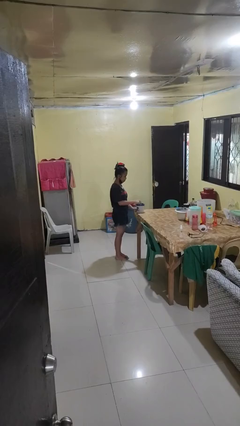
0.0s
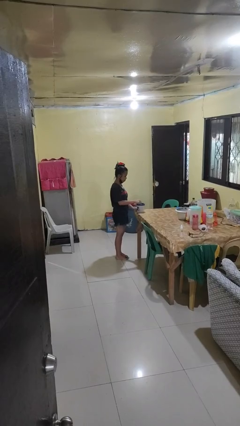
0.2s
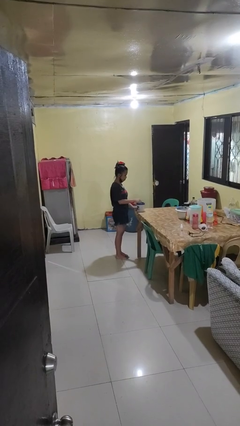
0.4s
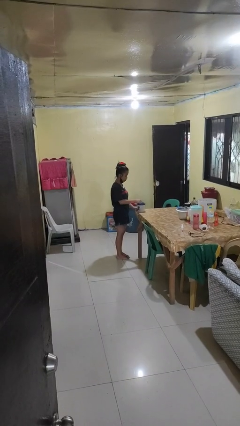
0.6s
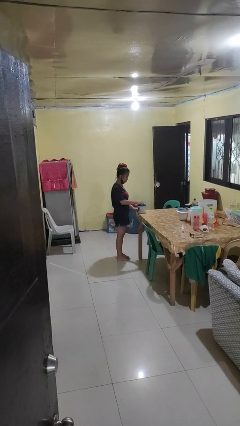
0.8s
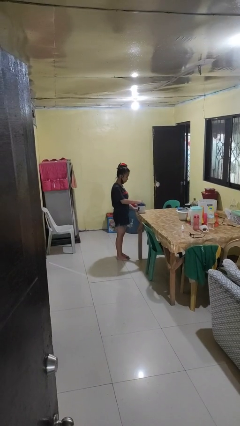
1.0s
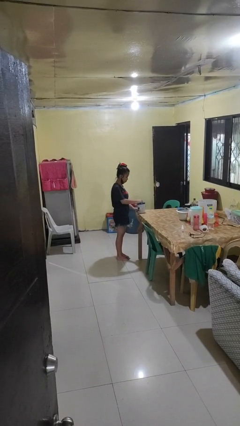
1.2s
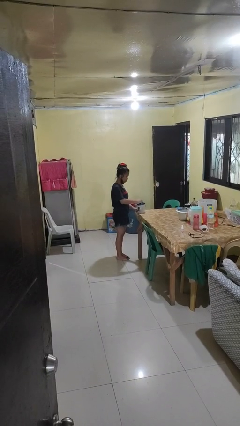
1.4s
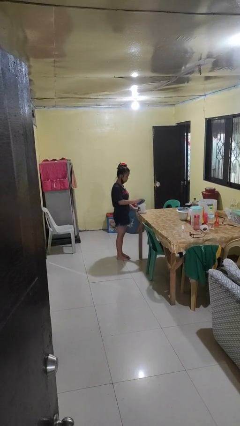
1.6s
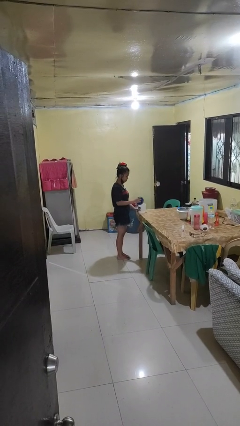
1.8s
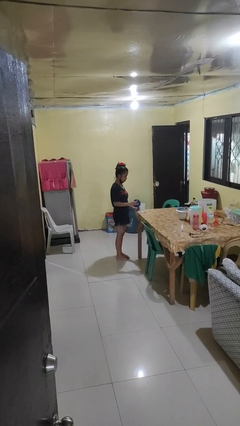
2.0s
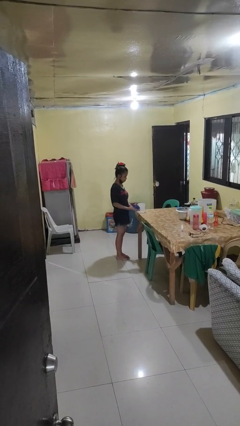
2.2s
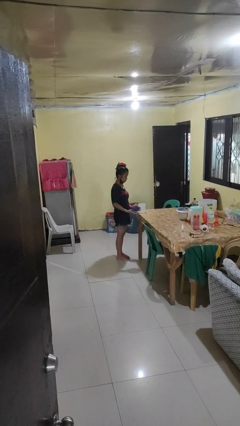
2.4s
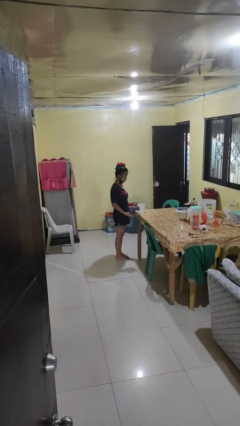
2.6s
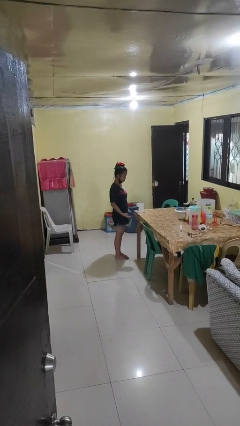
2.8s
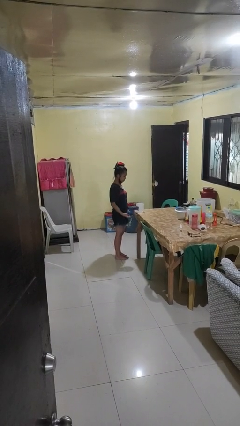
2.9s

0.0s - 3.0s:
person opens jar

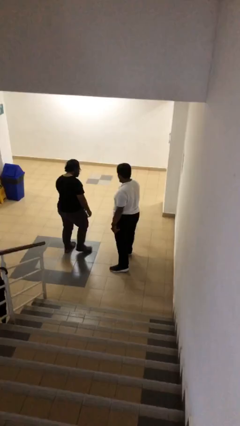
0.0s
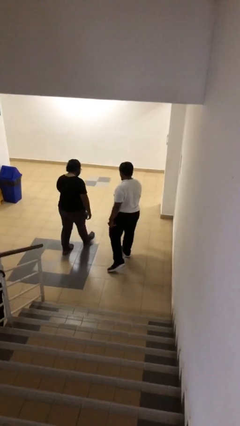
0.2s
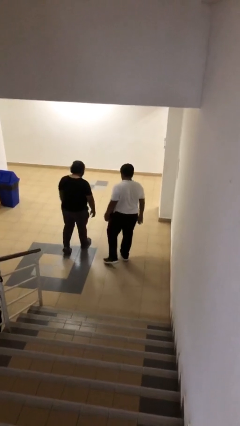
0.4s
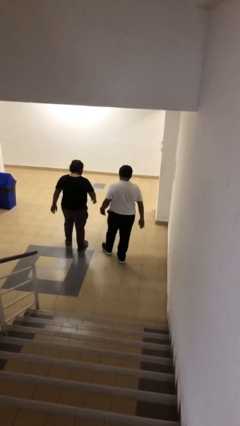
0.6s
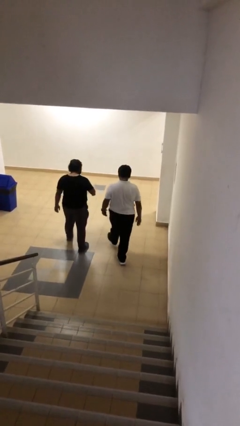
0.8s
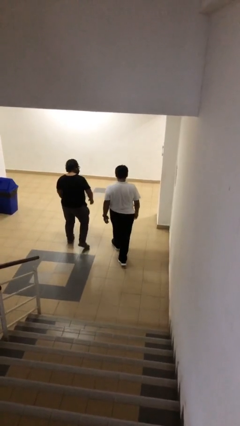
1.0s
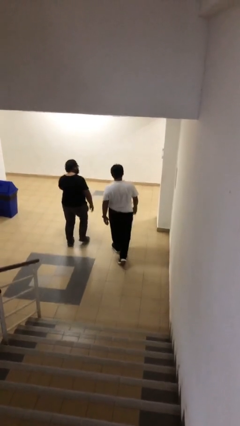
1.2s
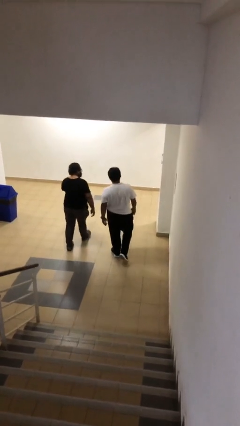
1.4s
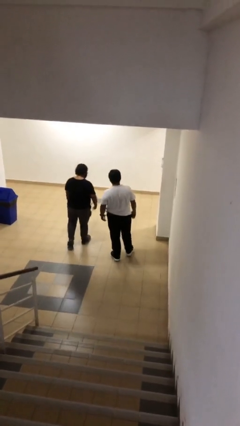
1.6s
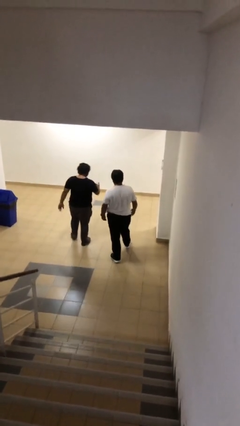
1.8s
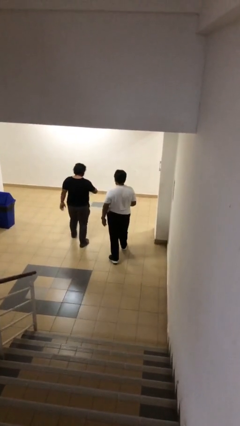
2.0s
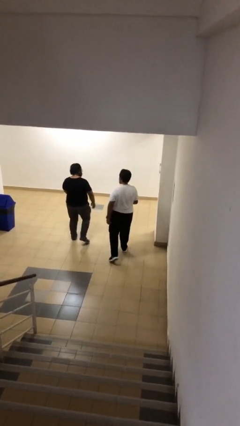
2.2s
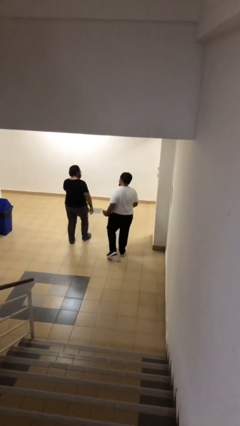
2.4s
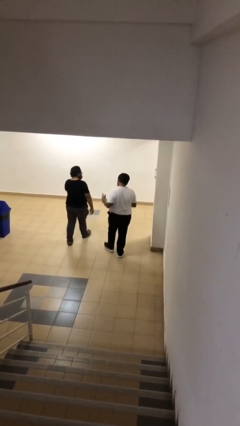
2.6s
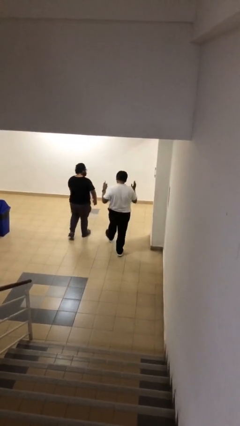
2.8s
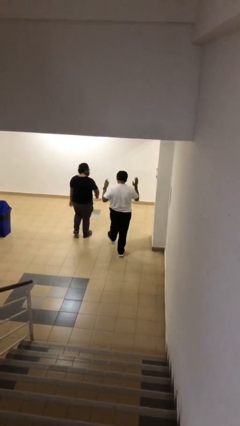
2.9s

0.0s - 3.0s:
person talks to person

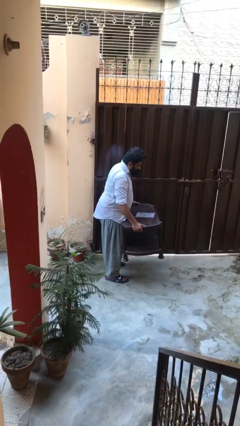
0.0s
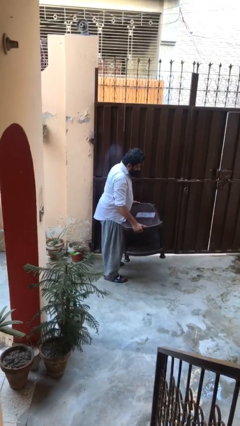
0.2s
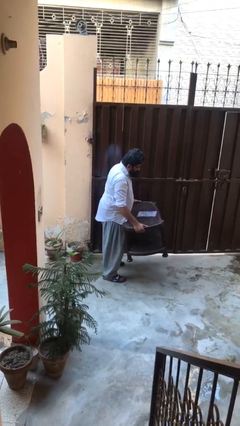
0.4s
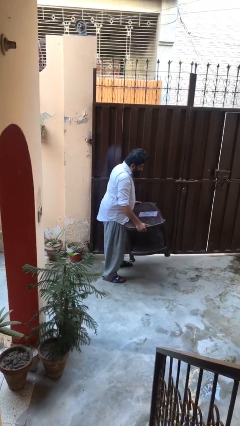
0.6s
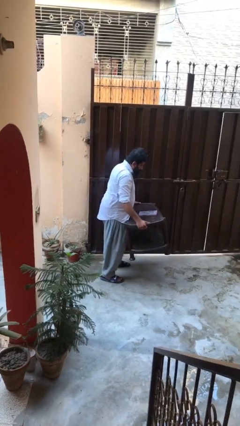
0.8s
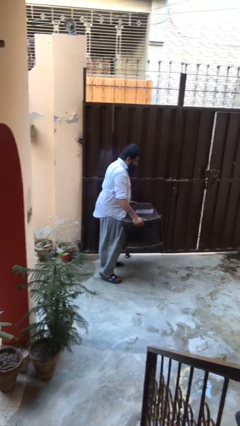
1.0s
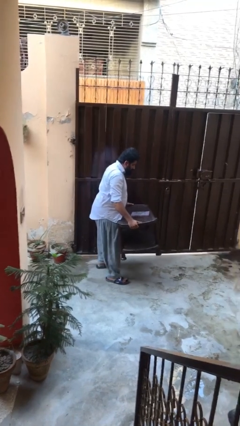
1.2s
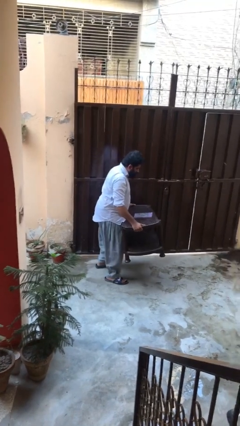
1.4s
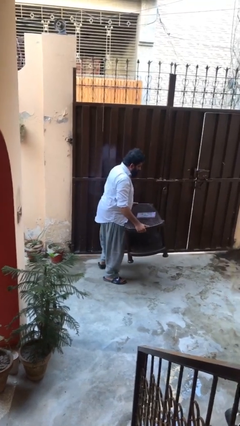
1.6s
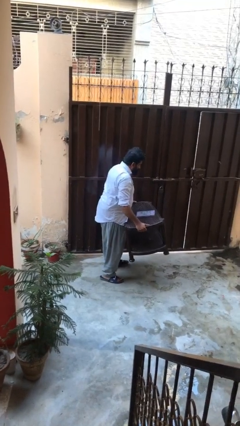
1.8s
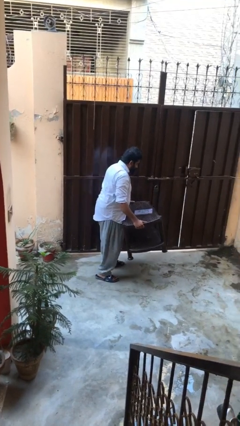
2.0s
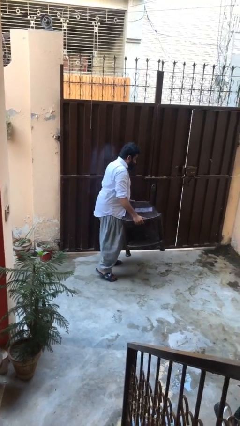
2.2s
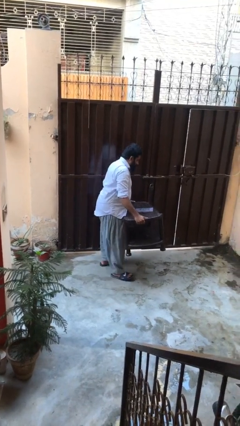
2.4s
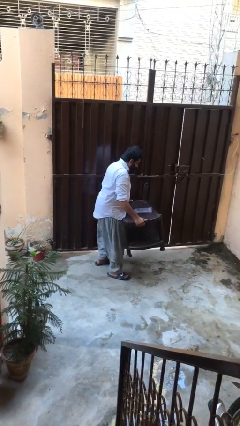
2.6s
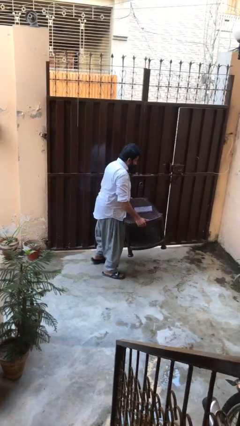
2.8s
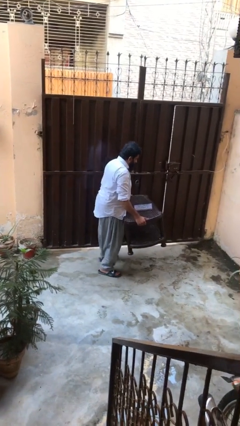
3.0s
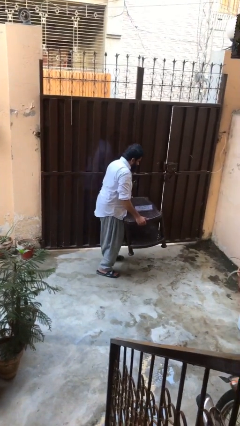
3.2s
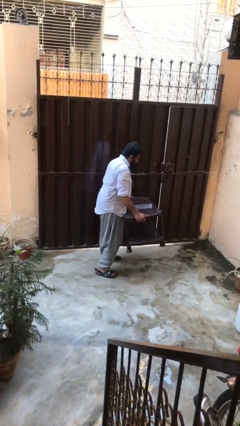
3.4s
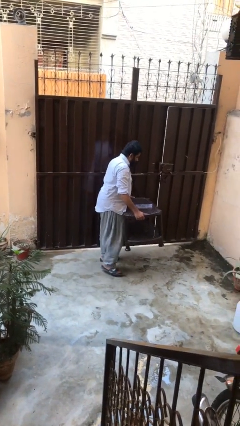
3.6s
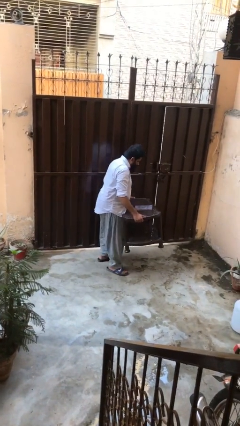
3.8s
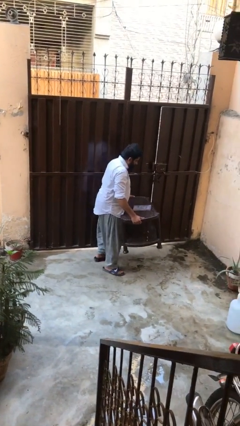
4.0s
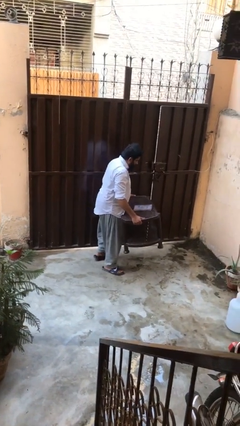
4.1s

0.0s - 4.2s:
person carries heavy object

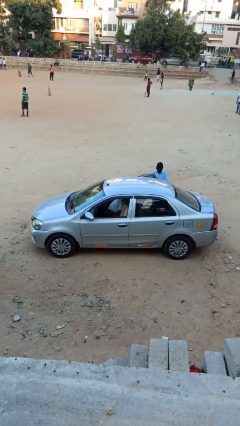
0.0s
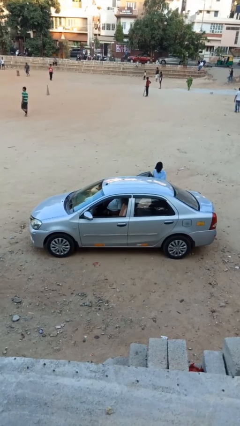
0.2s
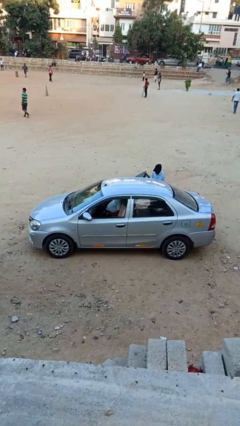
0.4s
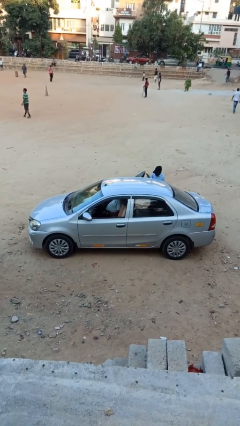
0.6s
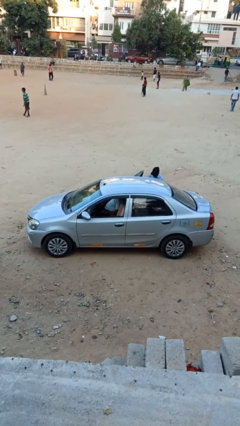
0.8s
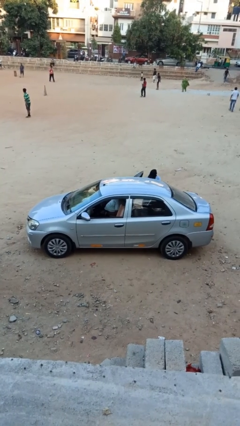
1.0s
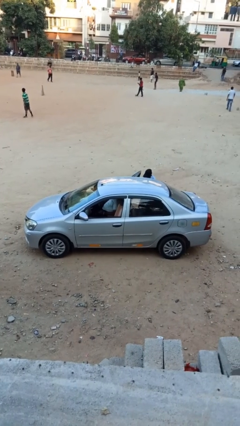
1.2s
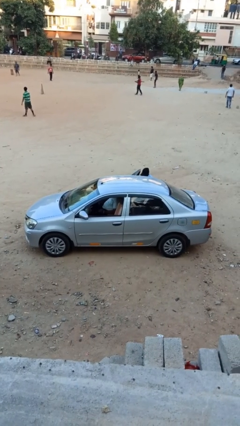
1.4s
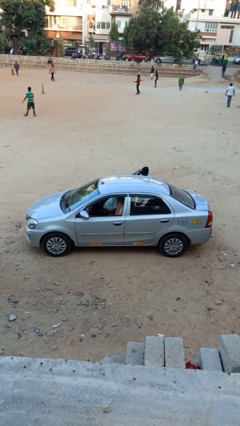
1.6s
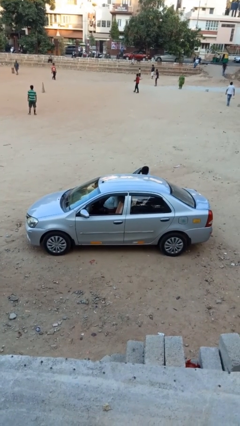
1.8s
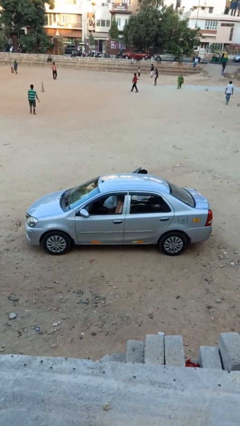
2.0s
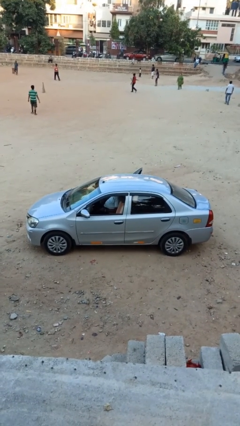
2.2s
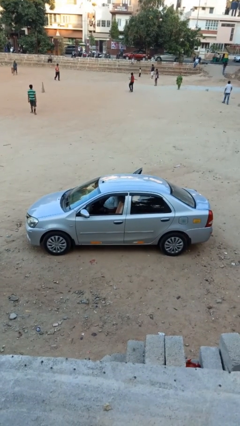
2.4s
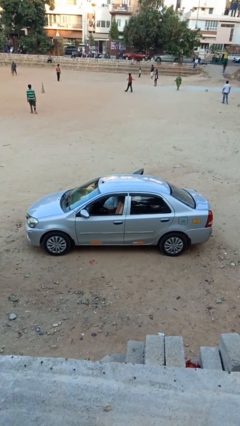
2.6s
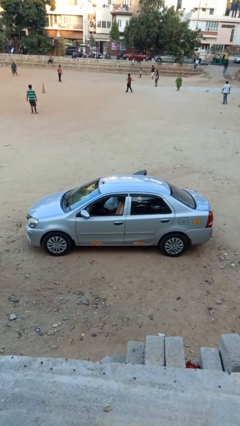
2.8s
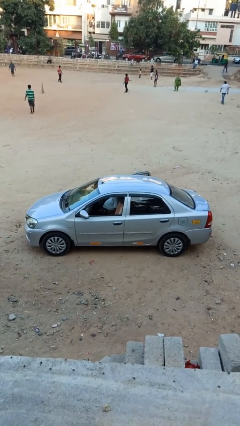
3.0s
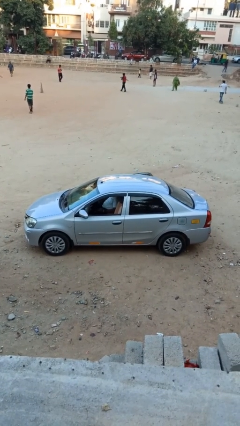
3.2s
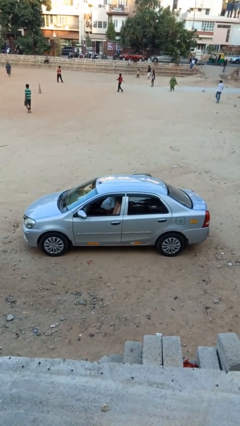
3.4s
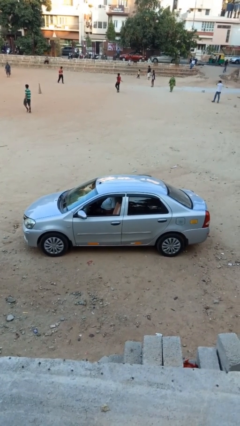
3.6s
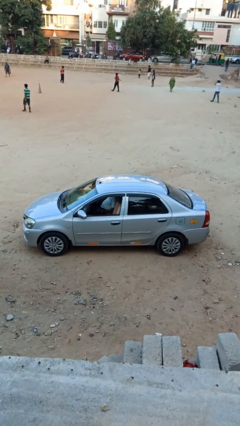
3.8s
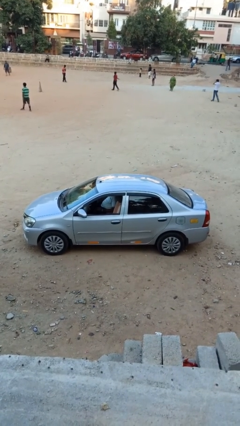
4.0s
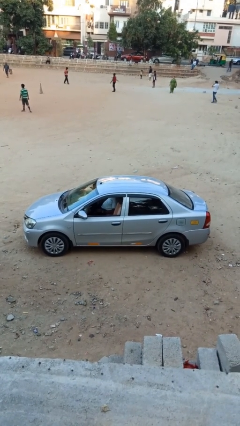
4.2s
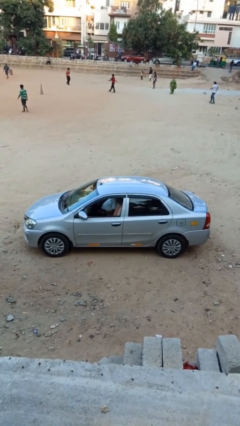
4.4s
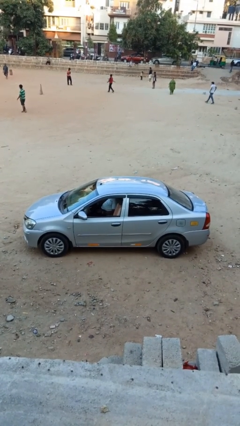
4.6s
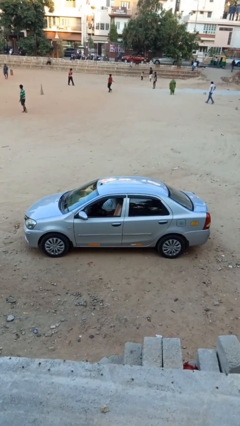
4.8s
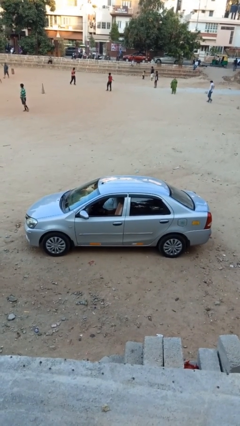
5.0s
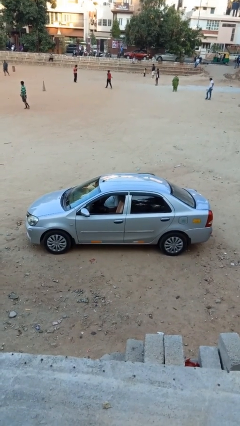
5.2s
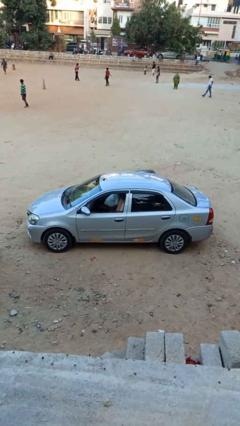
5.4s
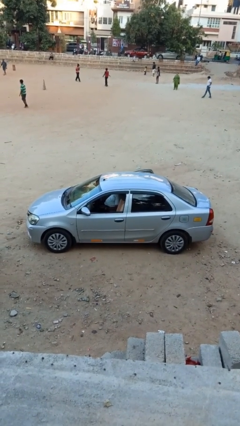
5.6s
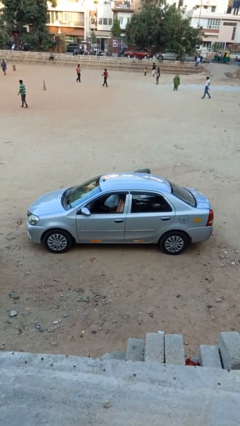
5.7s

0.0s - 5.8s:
car picks up person

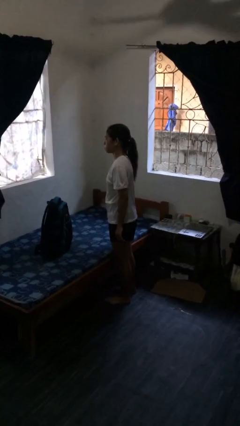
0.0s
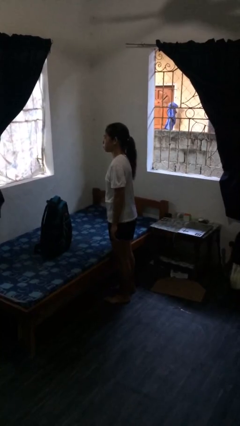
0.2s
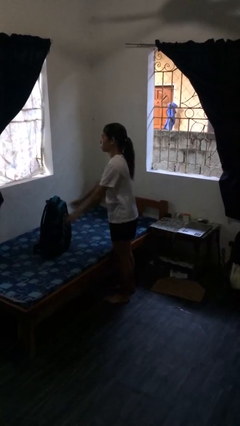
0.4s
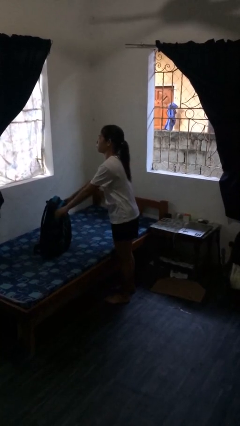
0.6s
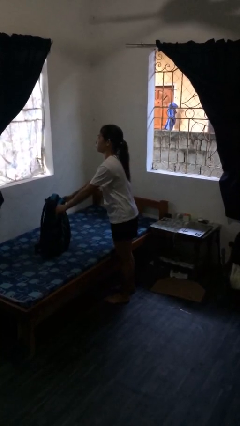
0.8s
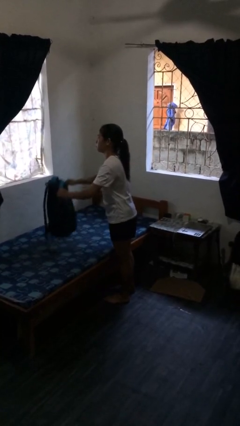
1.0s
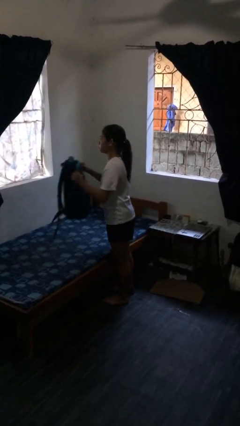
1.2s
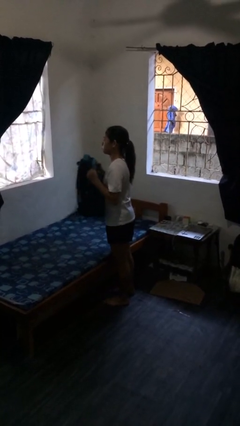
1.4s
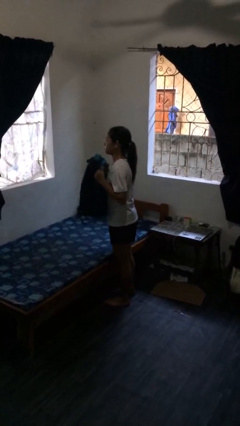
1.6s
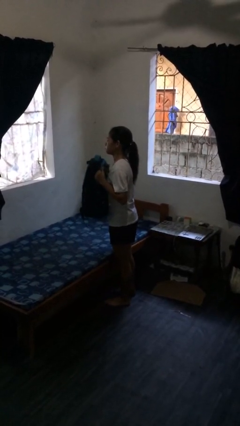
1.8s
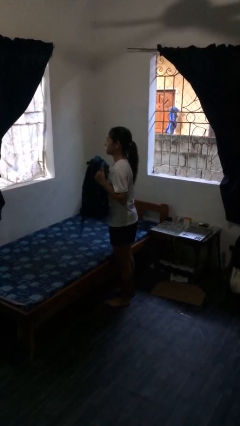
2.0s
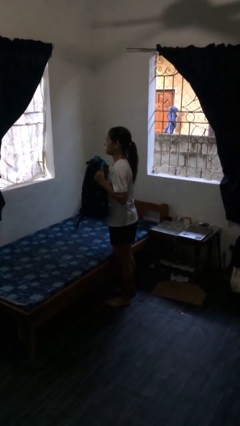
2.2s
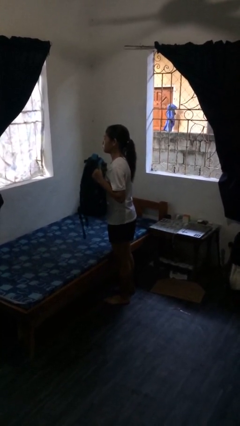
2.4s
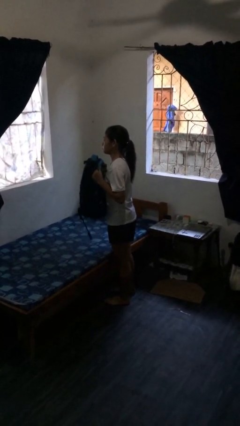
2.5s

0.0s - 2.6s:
person picks up object from bed
